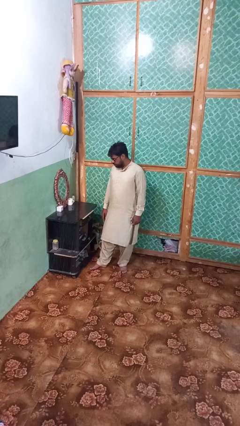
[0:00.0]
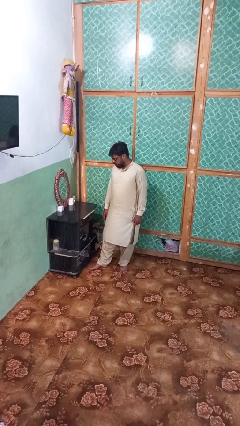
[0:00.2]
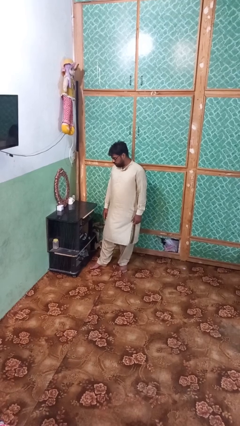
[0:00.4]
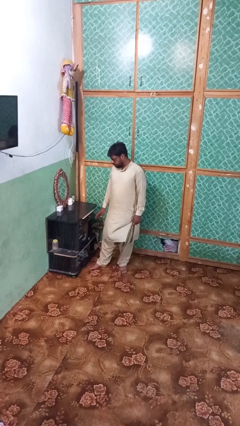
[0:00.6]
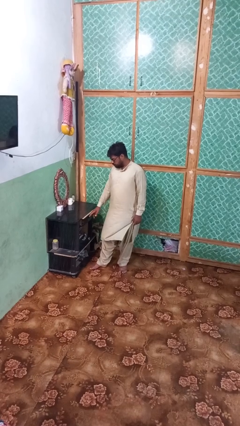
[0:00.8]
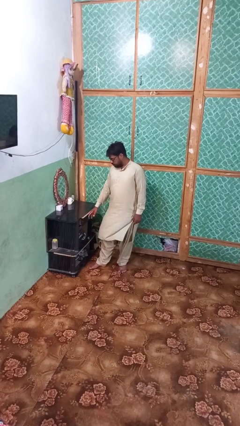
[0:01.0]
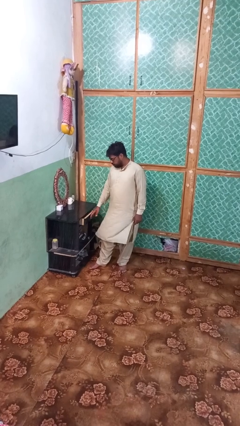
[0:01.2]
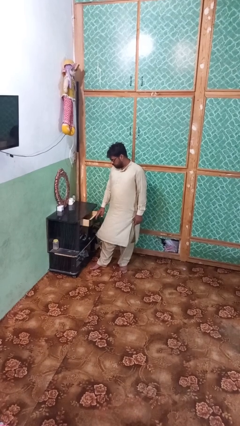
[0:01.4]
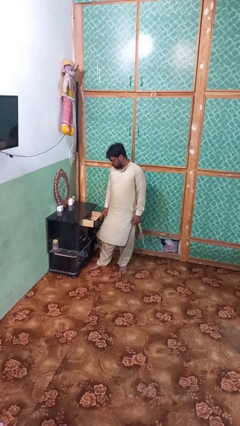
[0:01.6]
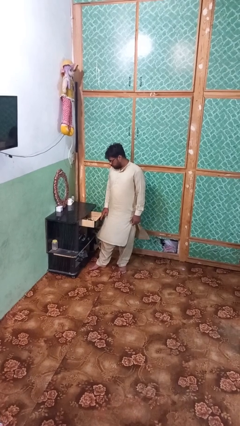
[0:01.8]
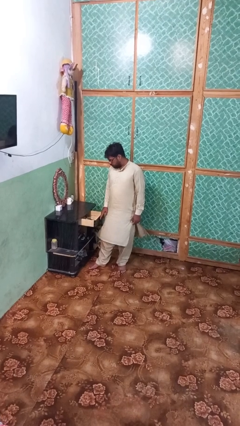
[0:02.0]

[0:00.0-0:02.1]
person opens dresser drawer

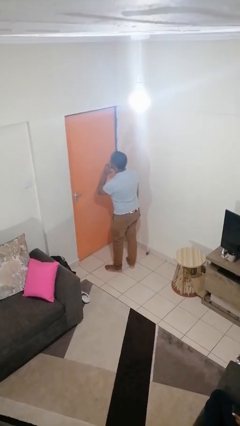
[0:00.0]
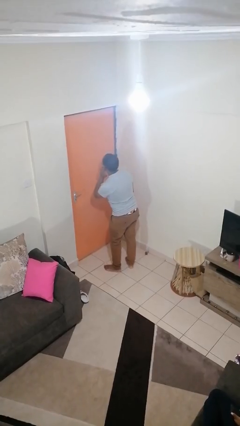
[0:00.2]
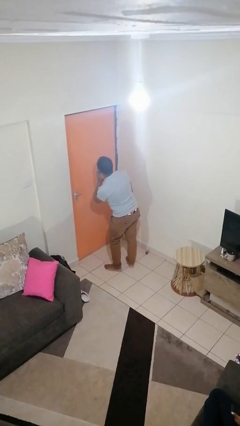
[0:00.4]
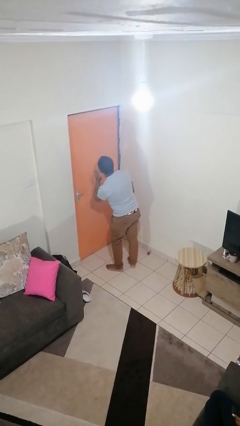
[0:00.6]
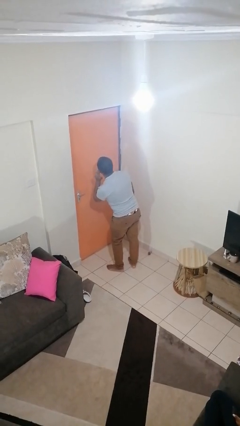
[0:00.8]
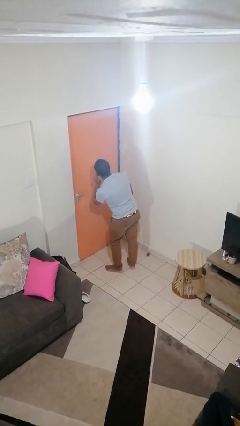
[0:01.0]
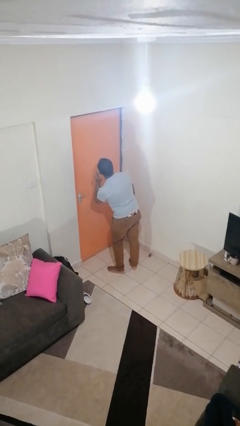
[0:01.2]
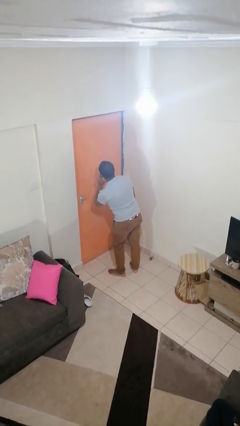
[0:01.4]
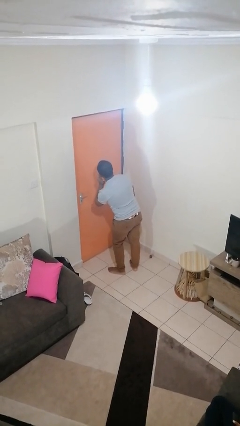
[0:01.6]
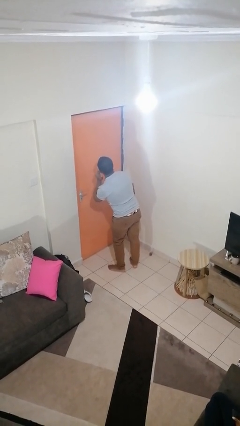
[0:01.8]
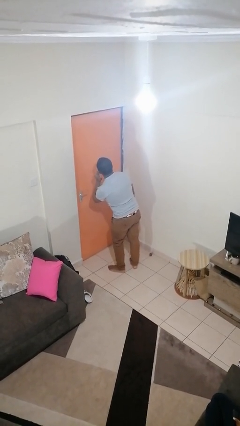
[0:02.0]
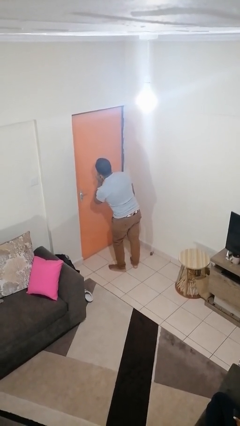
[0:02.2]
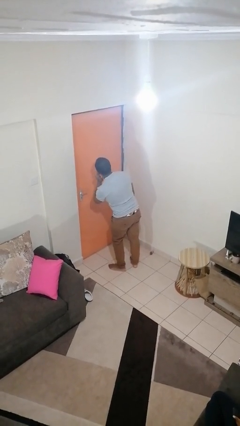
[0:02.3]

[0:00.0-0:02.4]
person gestures listen closely

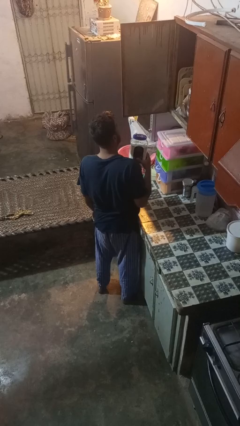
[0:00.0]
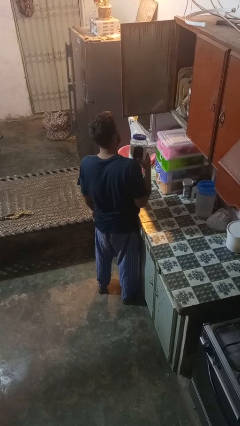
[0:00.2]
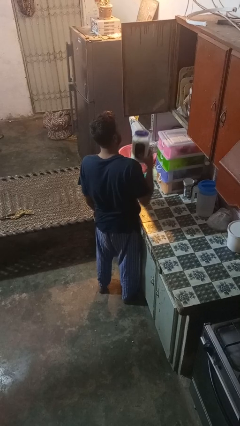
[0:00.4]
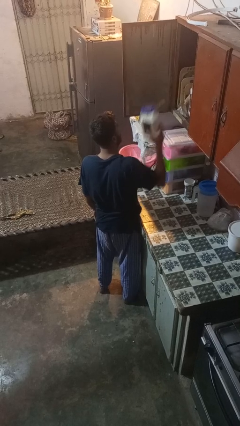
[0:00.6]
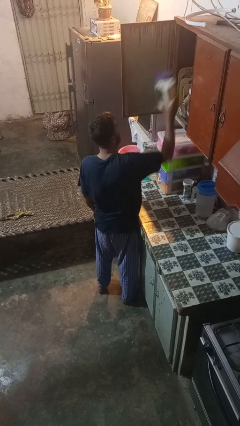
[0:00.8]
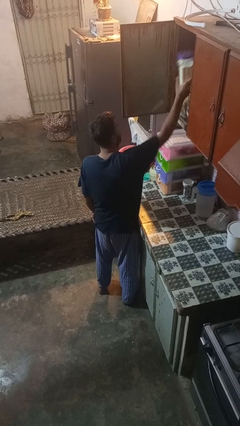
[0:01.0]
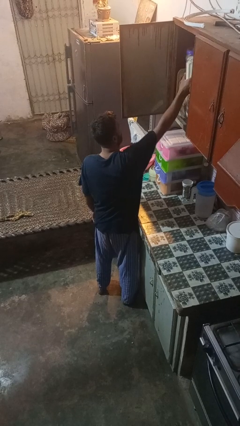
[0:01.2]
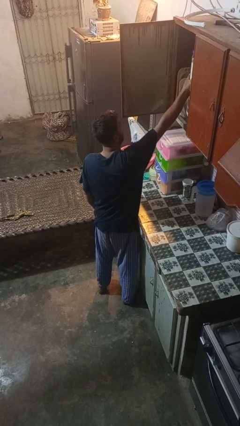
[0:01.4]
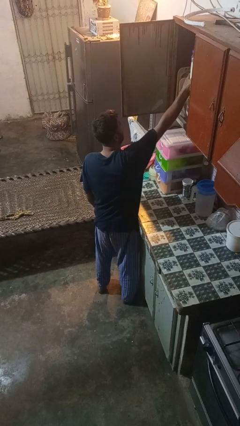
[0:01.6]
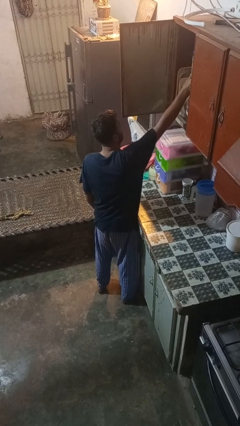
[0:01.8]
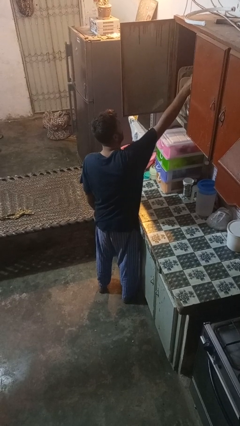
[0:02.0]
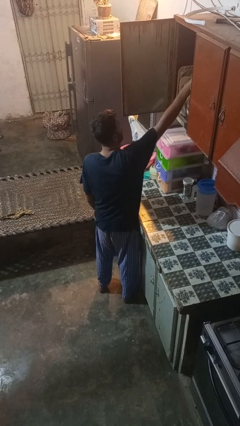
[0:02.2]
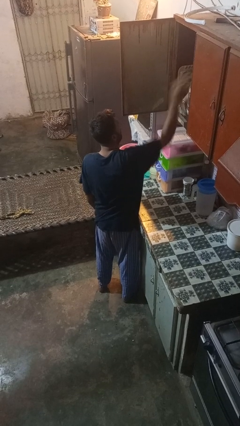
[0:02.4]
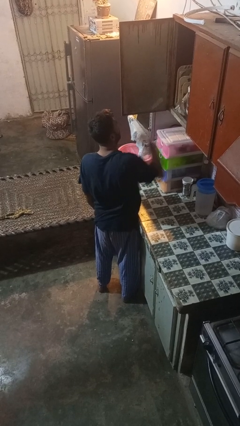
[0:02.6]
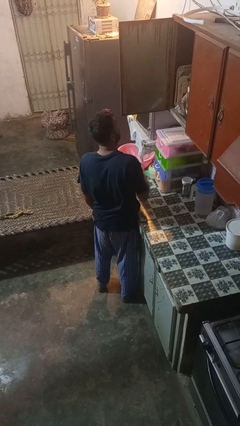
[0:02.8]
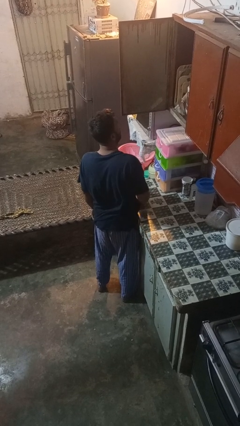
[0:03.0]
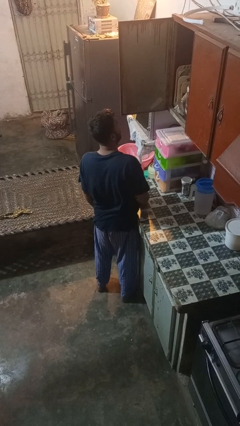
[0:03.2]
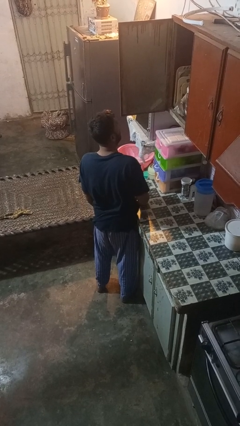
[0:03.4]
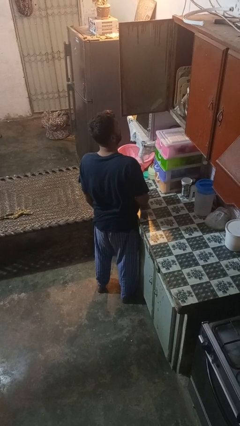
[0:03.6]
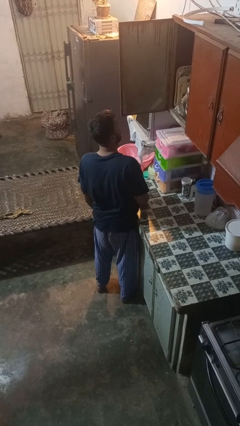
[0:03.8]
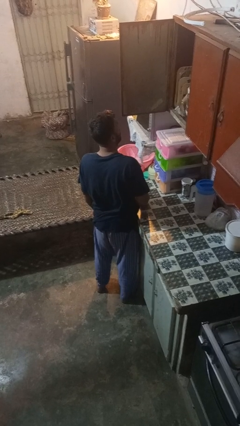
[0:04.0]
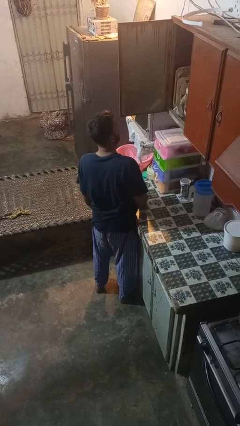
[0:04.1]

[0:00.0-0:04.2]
person takes object from cabinet

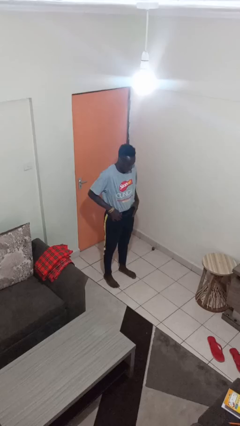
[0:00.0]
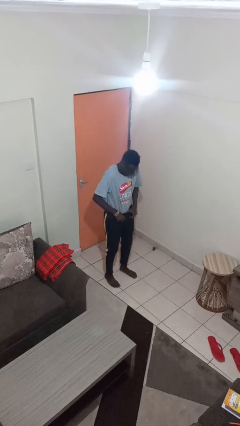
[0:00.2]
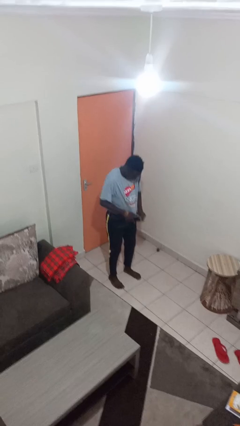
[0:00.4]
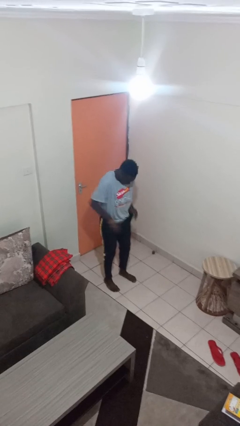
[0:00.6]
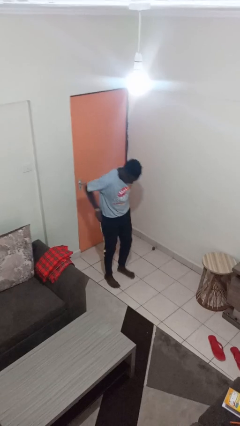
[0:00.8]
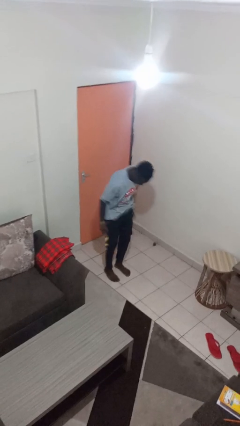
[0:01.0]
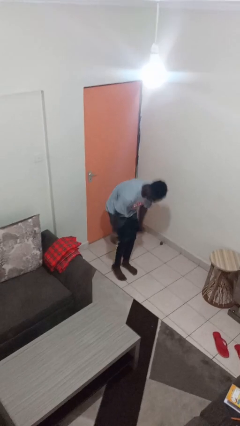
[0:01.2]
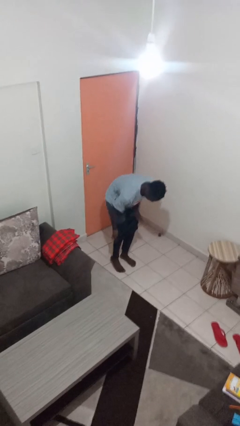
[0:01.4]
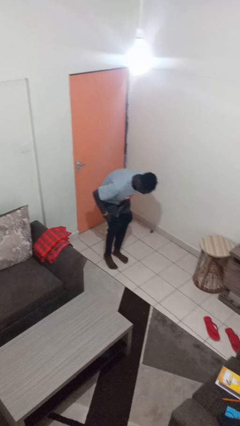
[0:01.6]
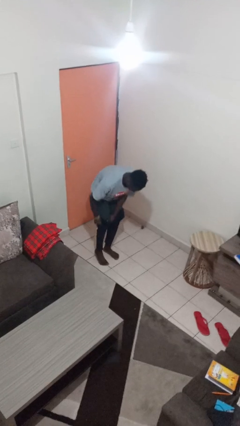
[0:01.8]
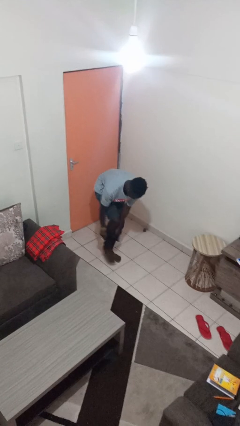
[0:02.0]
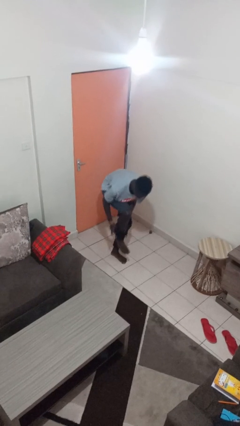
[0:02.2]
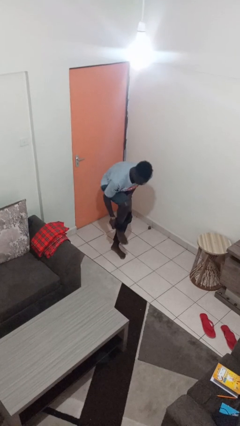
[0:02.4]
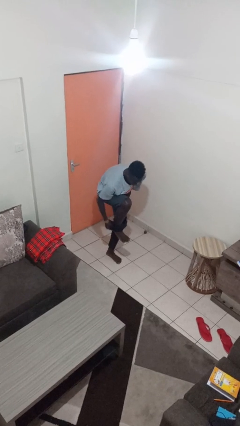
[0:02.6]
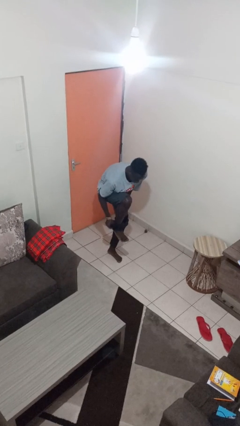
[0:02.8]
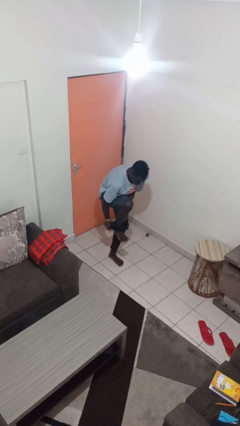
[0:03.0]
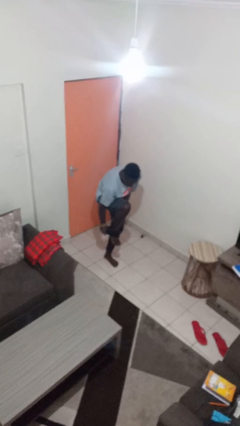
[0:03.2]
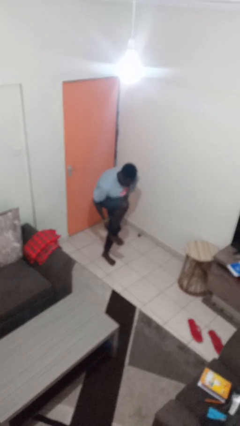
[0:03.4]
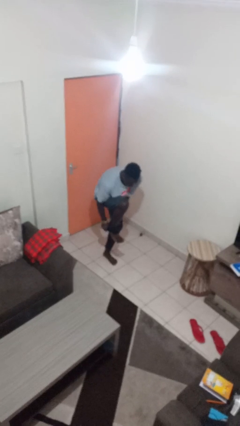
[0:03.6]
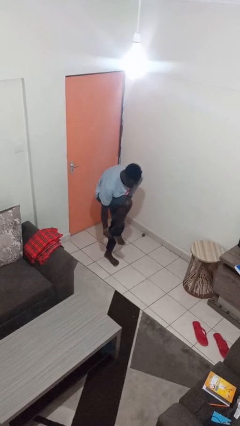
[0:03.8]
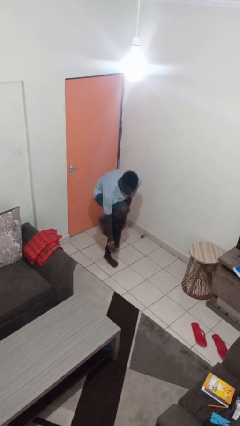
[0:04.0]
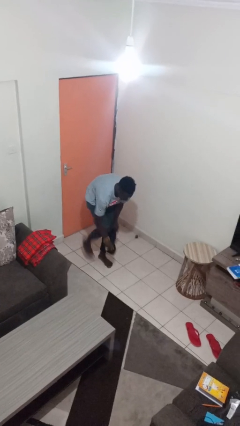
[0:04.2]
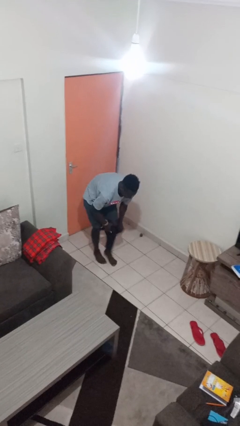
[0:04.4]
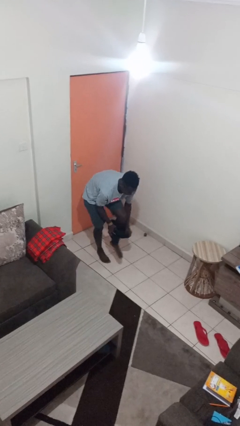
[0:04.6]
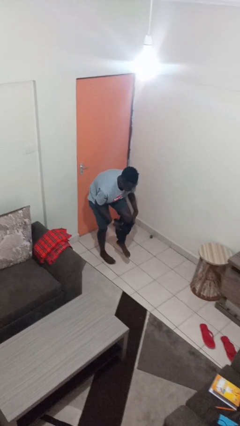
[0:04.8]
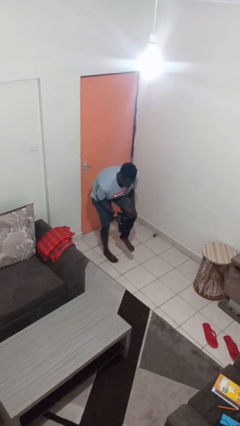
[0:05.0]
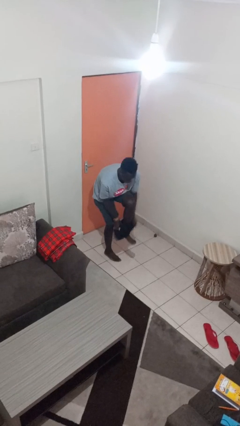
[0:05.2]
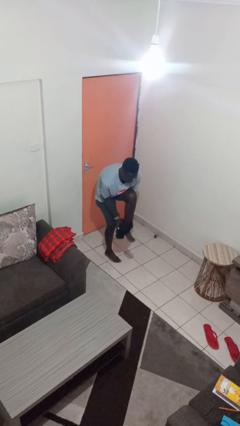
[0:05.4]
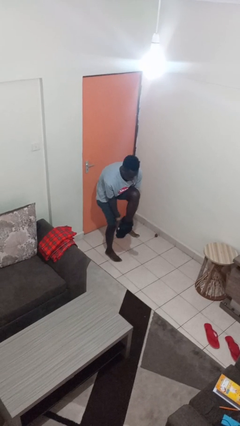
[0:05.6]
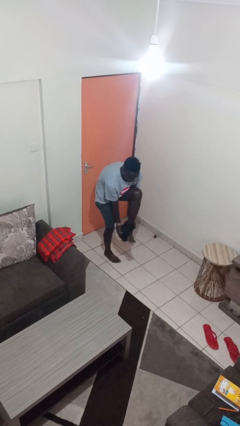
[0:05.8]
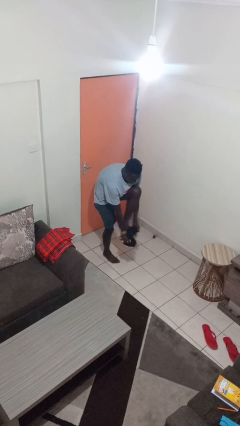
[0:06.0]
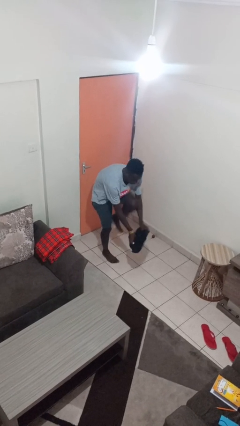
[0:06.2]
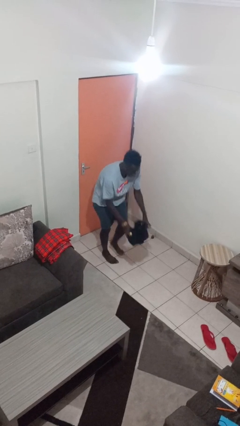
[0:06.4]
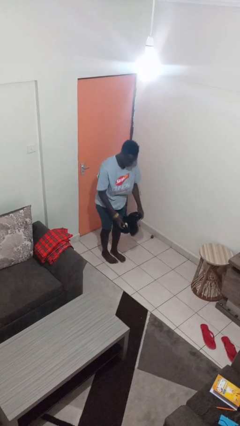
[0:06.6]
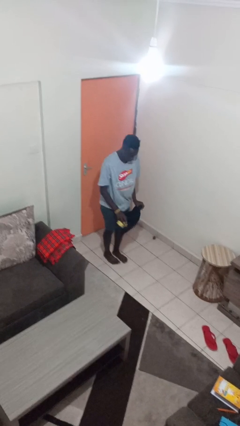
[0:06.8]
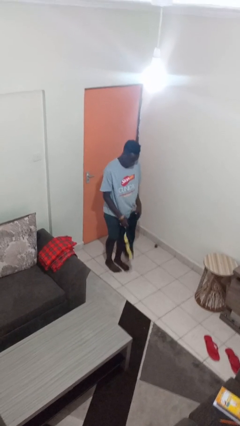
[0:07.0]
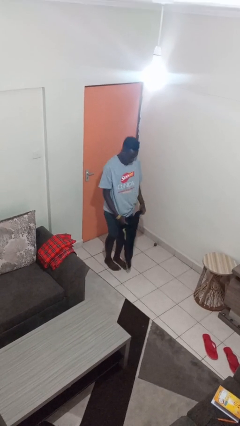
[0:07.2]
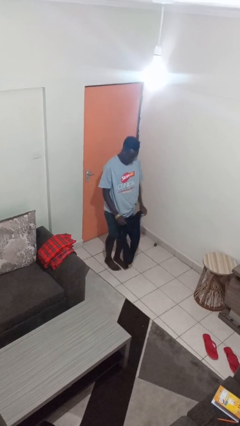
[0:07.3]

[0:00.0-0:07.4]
person takes off pants

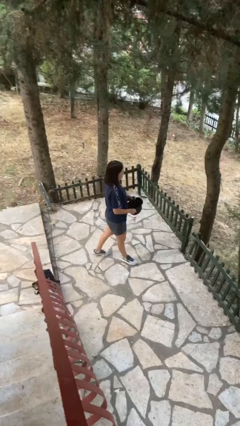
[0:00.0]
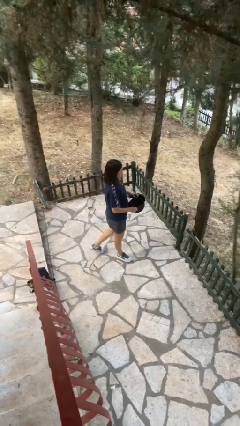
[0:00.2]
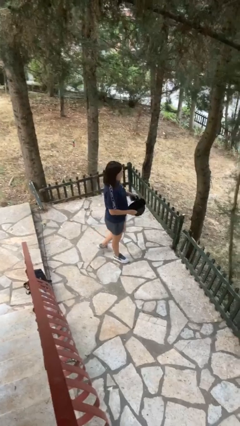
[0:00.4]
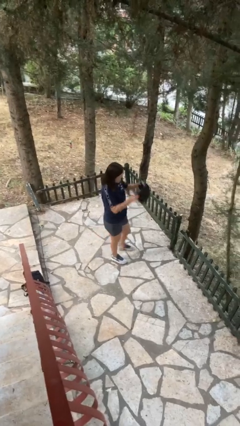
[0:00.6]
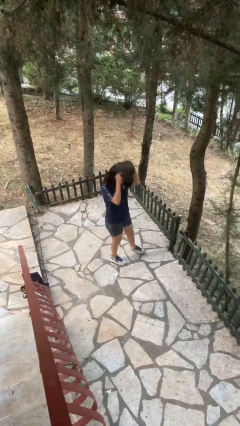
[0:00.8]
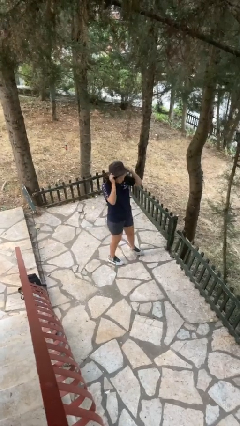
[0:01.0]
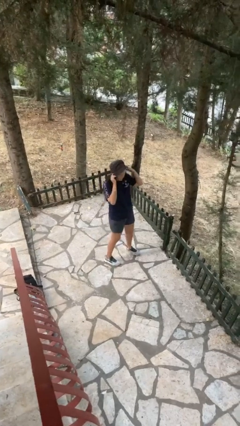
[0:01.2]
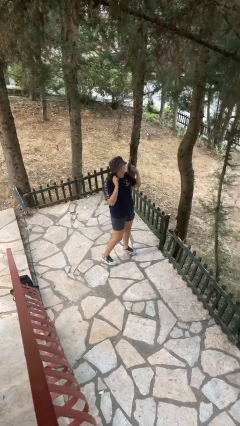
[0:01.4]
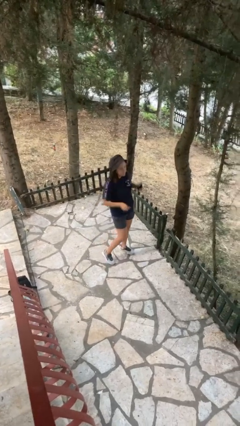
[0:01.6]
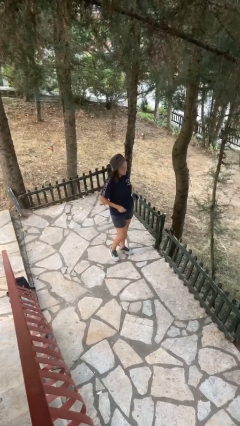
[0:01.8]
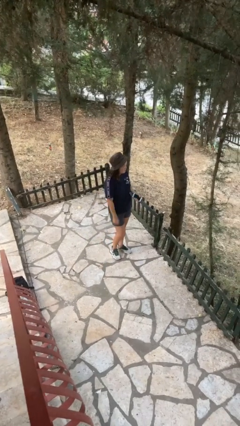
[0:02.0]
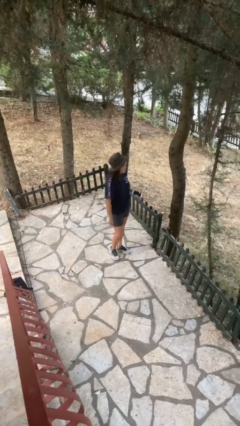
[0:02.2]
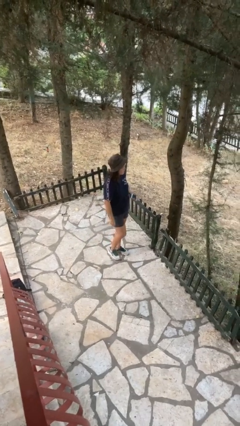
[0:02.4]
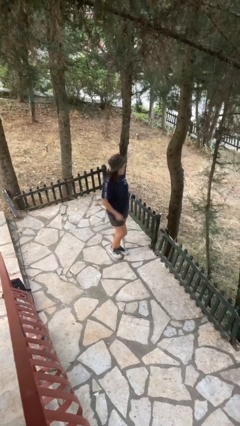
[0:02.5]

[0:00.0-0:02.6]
person puts on hat
